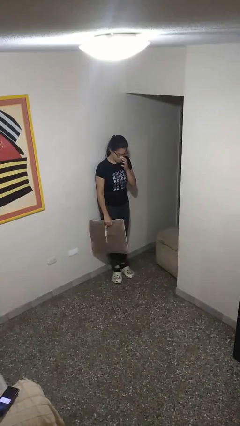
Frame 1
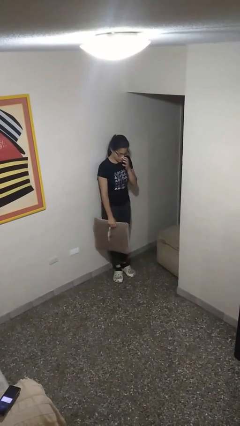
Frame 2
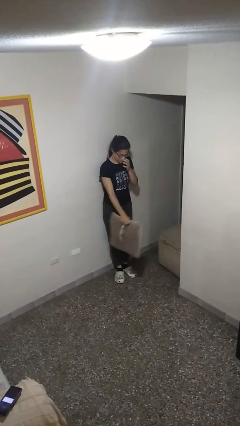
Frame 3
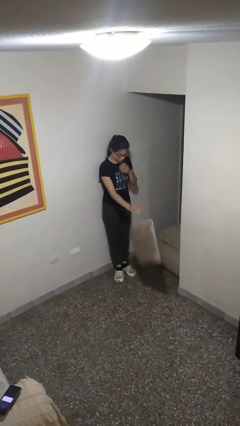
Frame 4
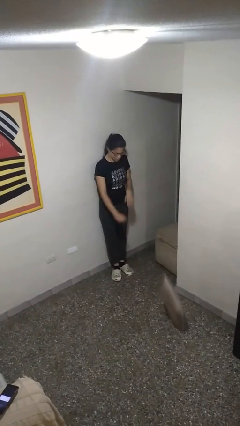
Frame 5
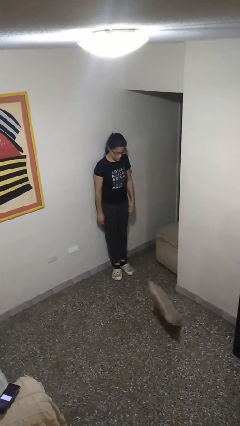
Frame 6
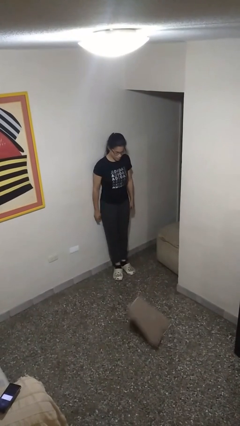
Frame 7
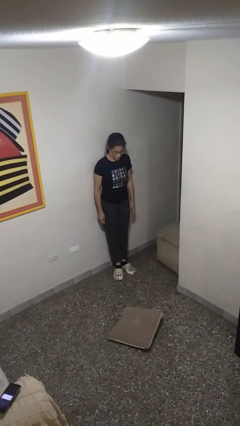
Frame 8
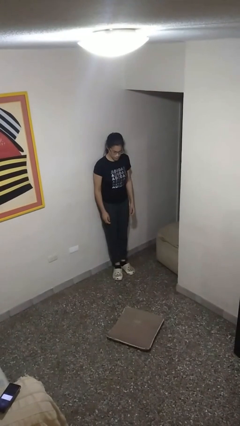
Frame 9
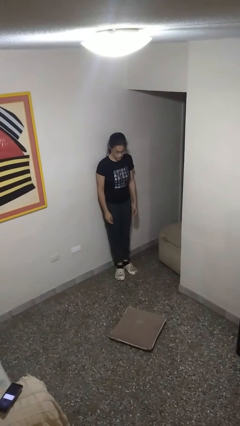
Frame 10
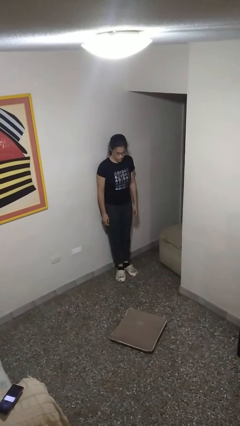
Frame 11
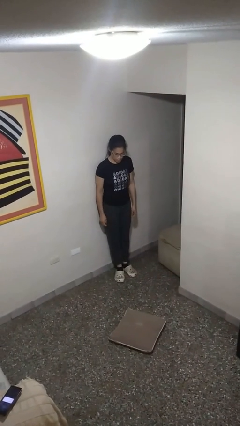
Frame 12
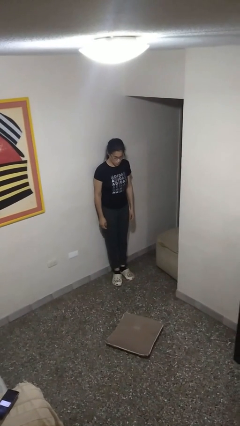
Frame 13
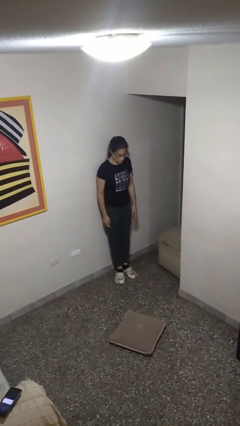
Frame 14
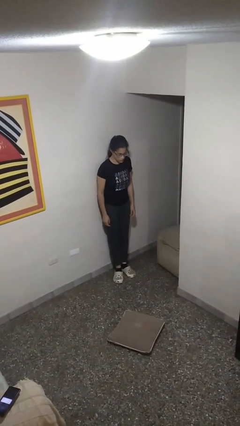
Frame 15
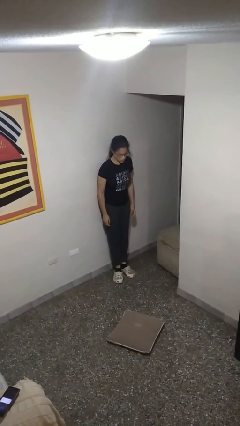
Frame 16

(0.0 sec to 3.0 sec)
person throws object to ground

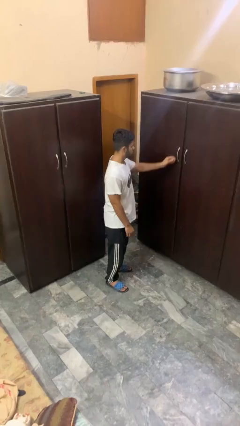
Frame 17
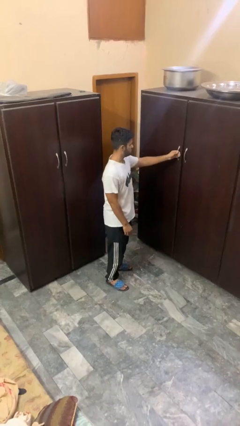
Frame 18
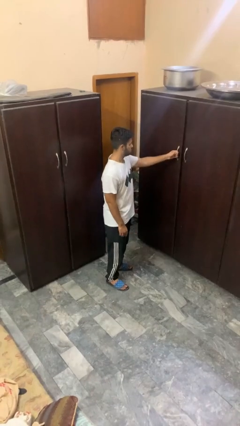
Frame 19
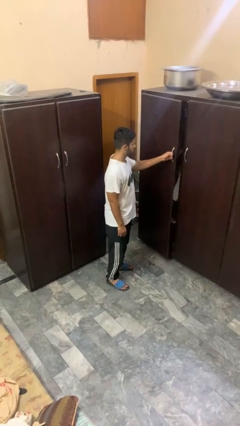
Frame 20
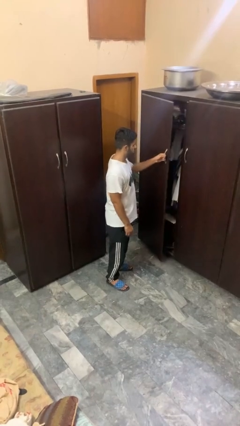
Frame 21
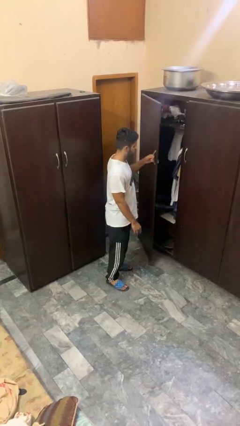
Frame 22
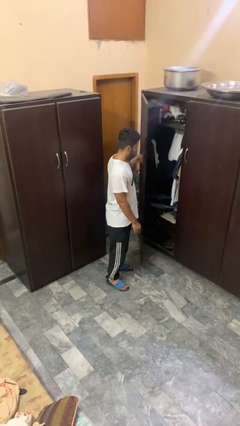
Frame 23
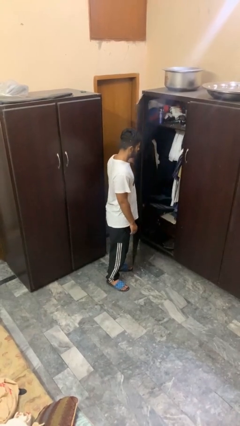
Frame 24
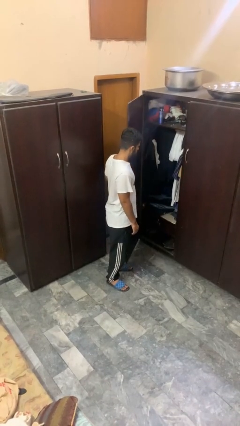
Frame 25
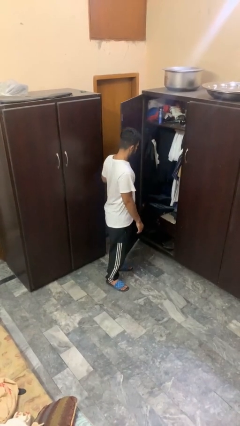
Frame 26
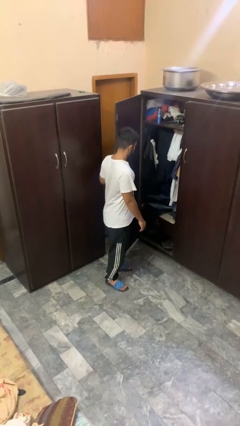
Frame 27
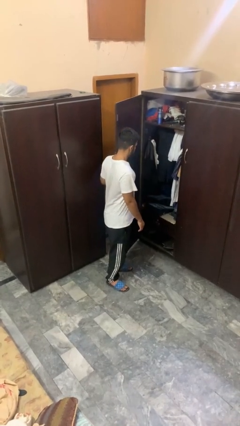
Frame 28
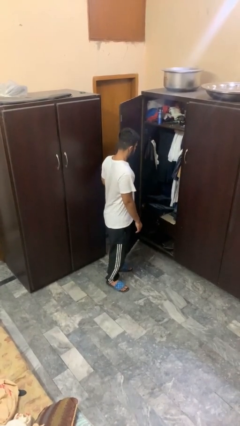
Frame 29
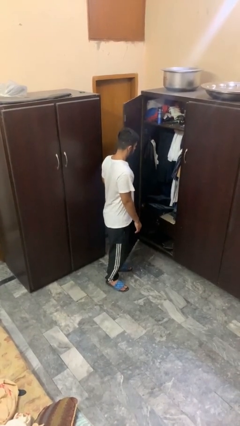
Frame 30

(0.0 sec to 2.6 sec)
person opens closet door

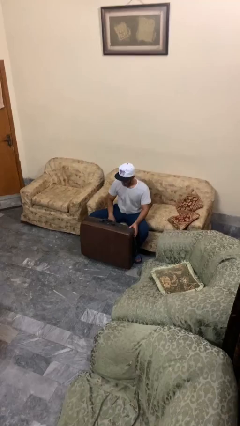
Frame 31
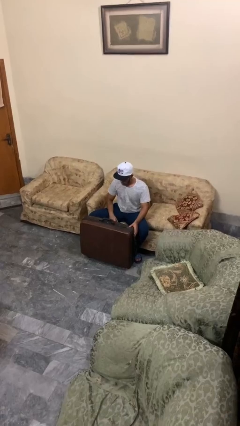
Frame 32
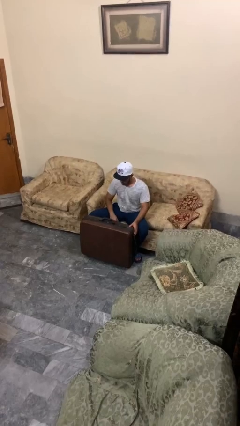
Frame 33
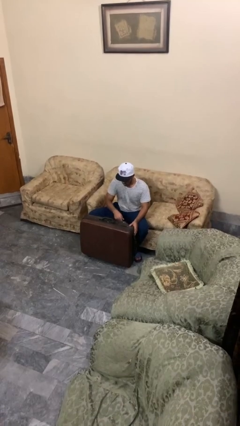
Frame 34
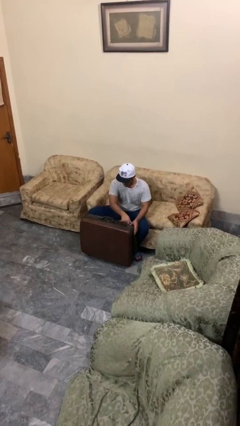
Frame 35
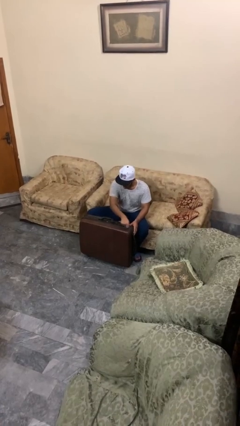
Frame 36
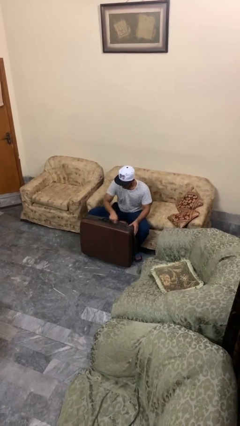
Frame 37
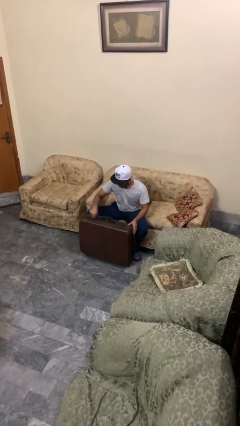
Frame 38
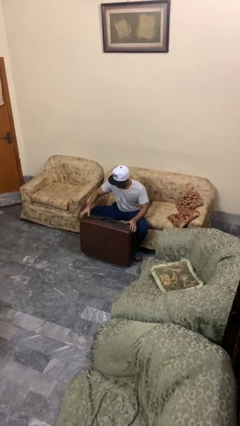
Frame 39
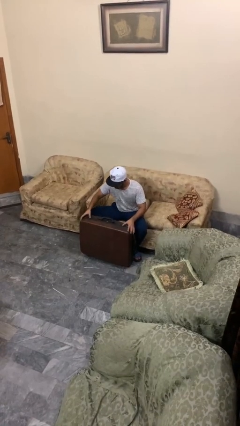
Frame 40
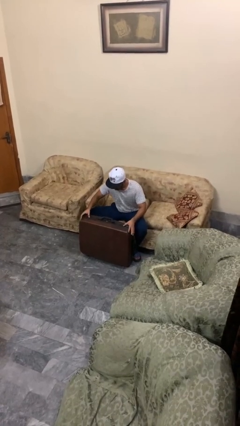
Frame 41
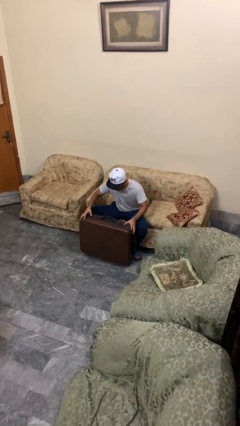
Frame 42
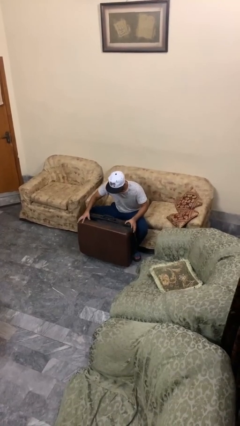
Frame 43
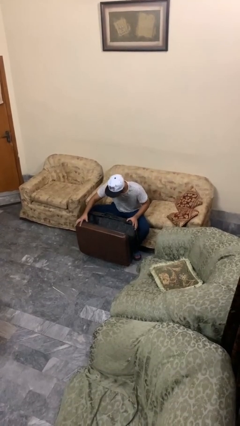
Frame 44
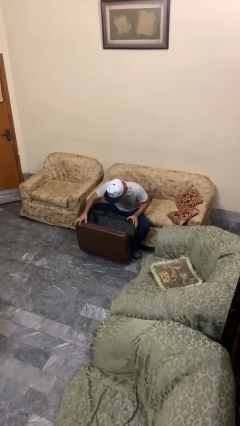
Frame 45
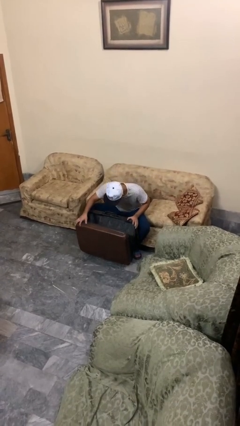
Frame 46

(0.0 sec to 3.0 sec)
person opens suitcase

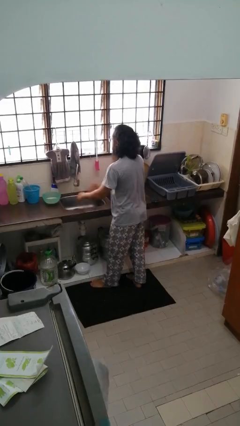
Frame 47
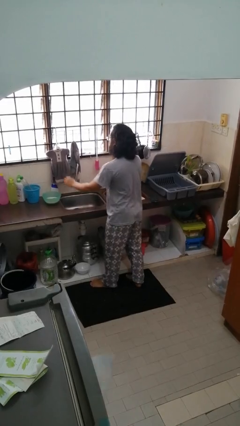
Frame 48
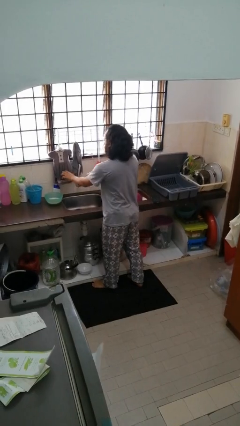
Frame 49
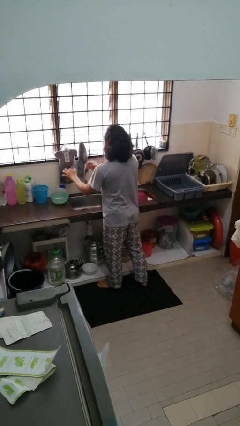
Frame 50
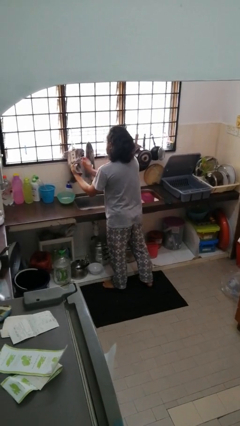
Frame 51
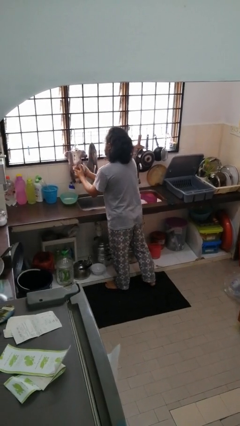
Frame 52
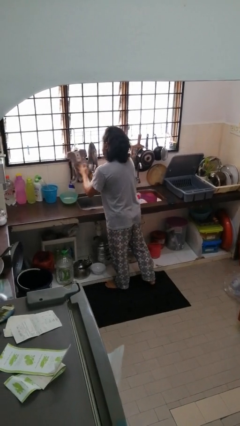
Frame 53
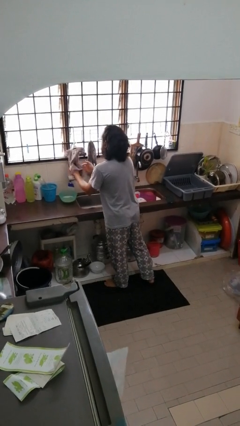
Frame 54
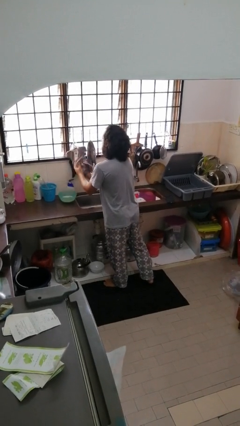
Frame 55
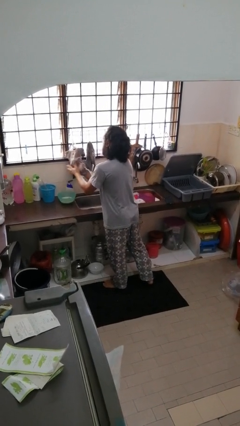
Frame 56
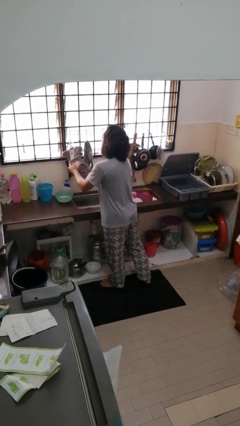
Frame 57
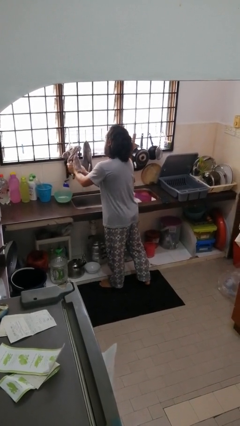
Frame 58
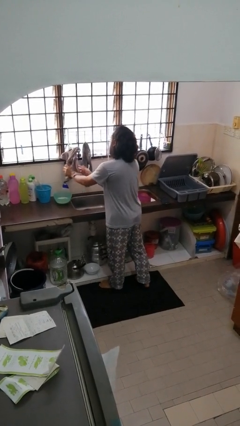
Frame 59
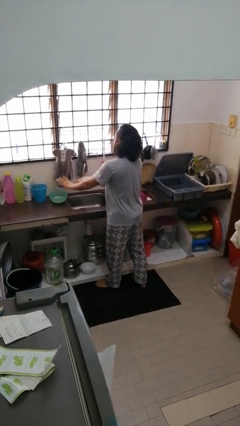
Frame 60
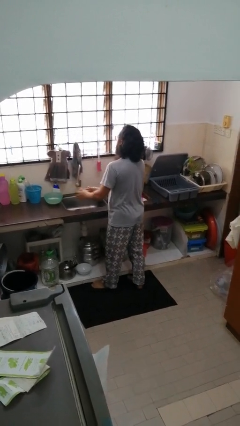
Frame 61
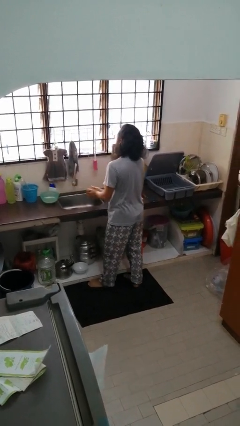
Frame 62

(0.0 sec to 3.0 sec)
person dries hands with towel

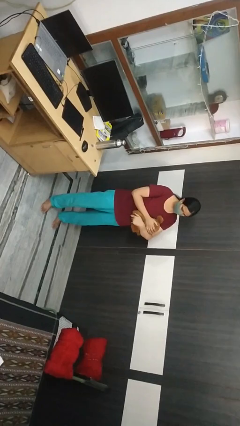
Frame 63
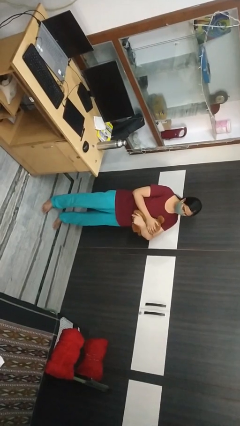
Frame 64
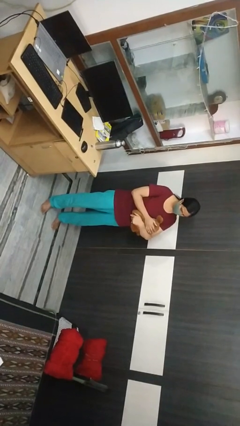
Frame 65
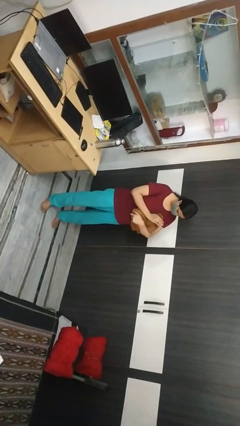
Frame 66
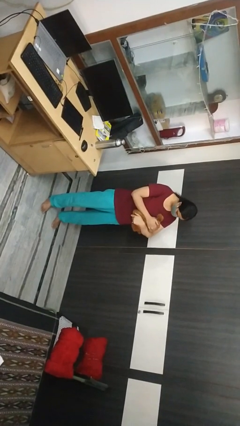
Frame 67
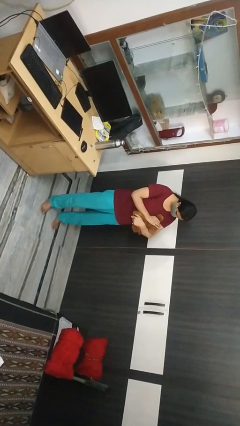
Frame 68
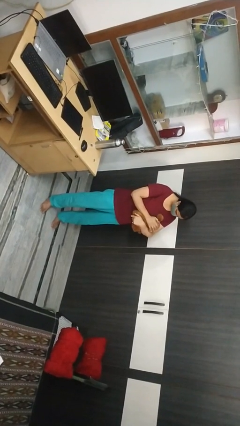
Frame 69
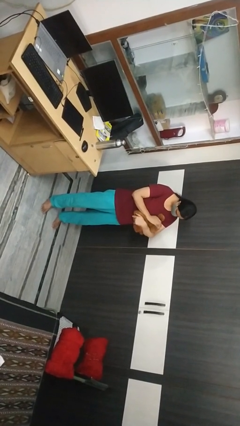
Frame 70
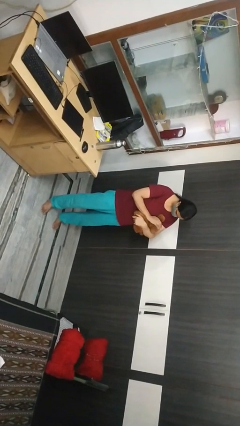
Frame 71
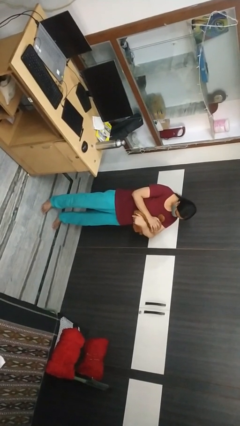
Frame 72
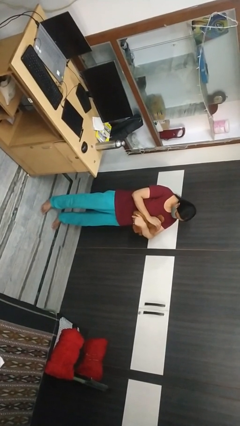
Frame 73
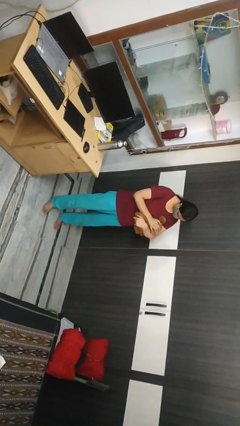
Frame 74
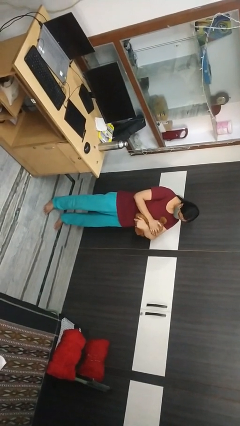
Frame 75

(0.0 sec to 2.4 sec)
person pets cat

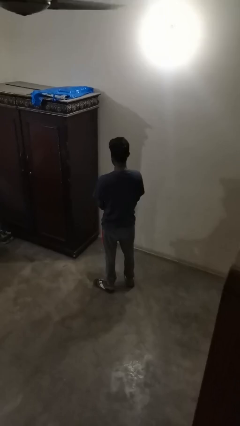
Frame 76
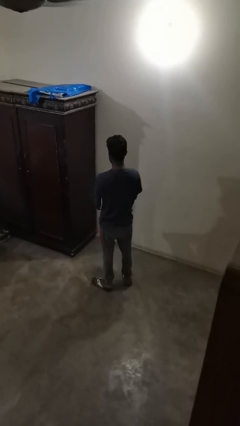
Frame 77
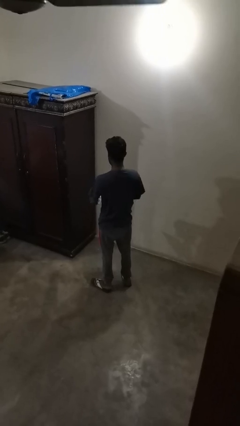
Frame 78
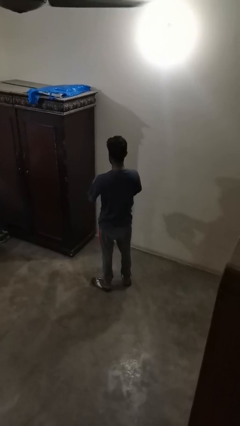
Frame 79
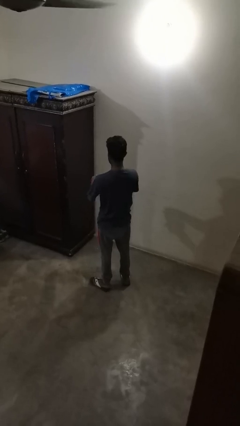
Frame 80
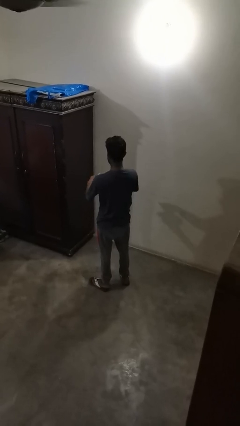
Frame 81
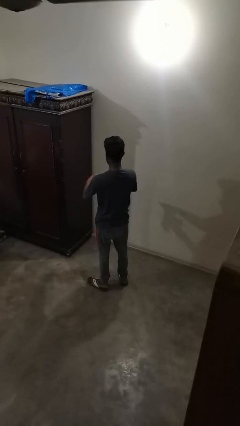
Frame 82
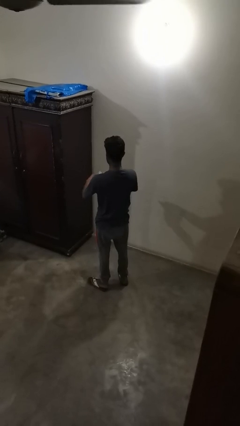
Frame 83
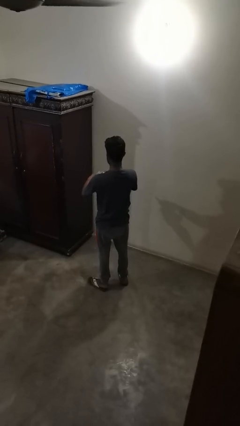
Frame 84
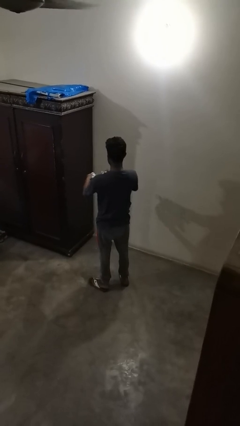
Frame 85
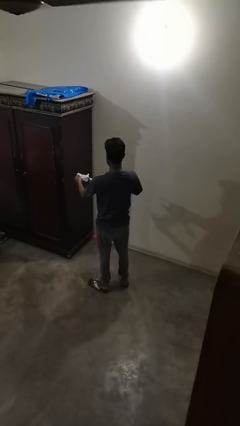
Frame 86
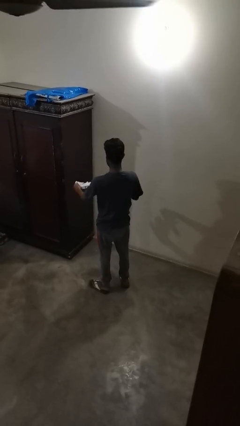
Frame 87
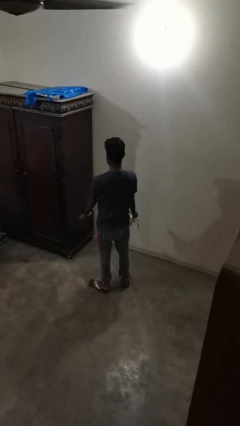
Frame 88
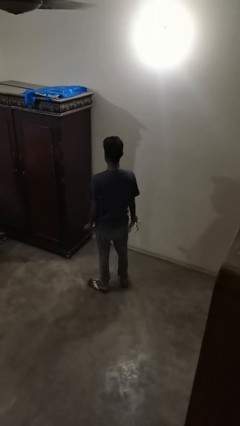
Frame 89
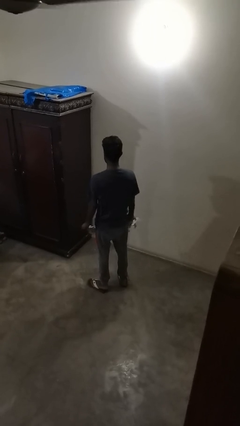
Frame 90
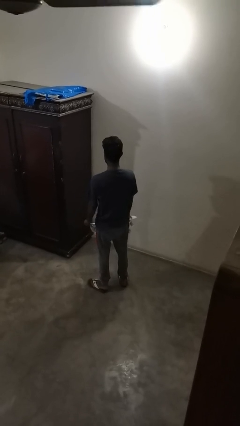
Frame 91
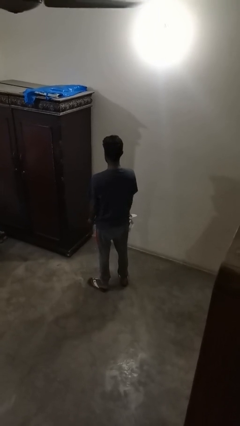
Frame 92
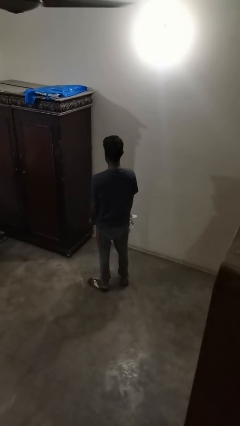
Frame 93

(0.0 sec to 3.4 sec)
person tears paper

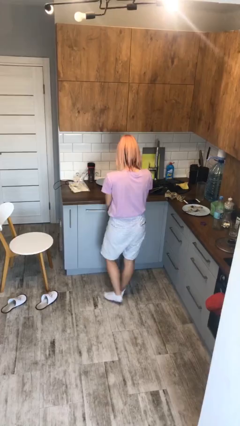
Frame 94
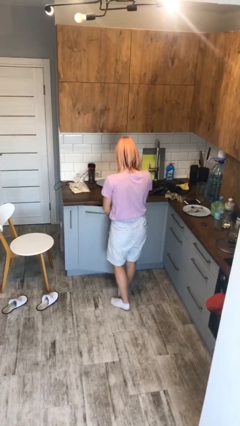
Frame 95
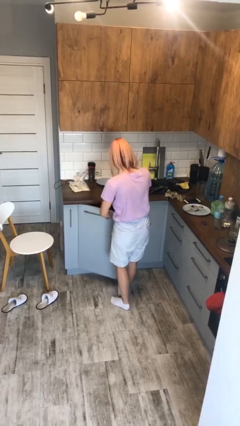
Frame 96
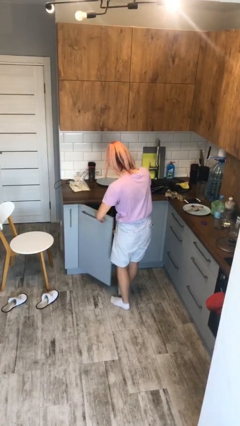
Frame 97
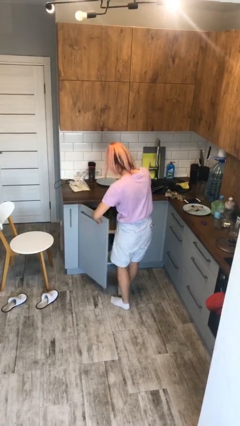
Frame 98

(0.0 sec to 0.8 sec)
person closes cabinet
